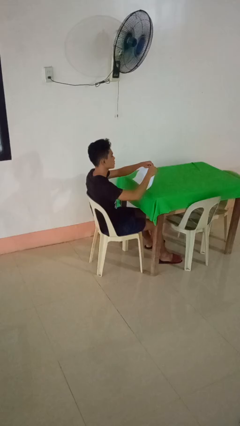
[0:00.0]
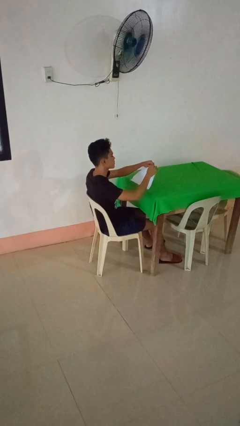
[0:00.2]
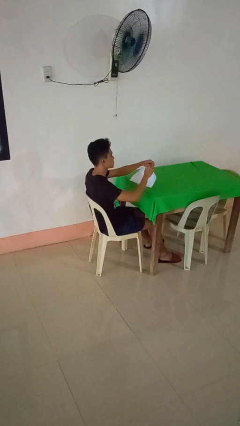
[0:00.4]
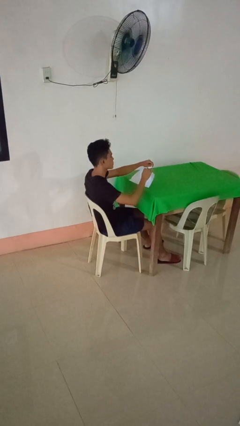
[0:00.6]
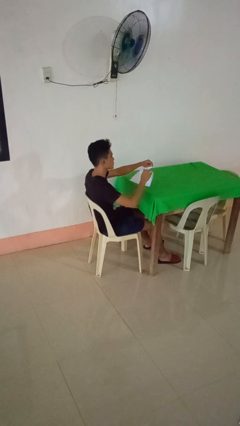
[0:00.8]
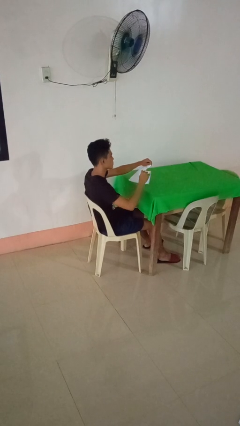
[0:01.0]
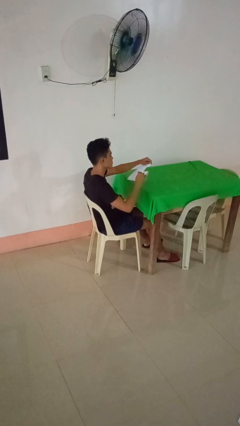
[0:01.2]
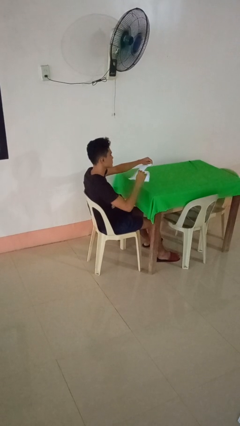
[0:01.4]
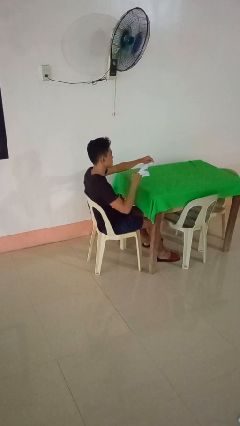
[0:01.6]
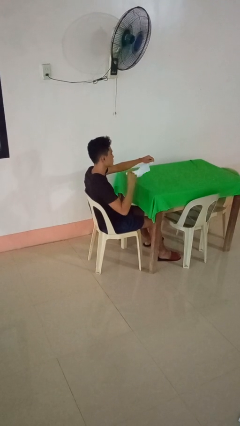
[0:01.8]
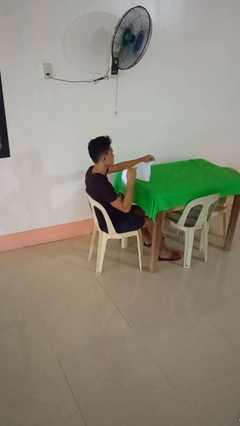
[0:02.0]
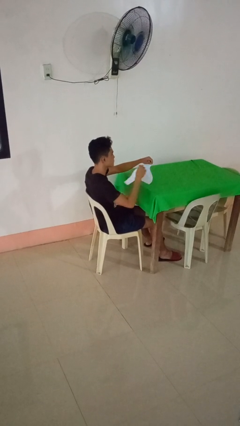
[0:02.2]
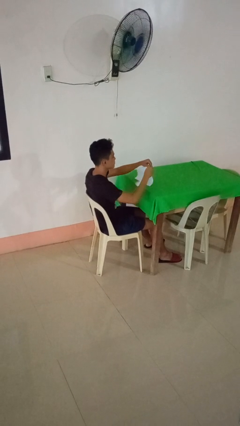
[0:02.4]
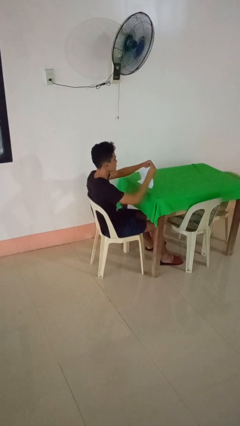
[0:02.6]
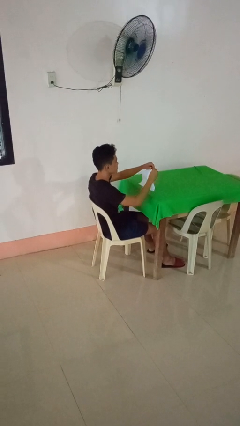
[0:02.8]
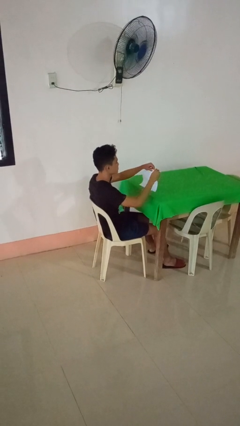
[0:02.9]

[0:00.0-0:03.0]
person tears paper

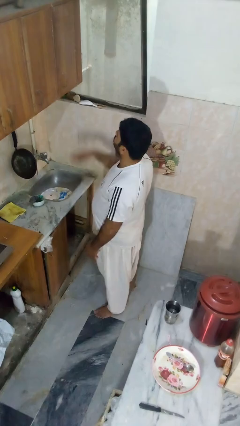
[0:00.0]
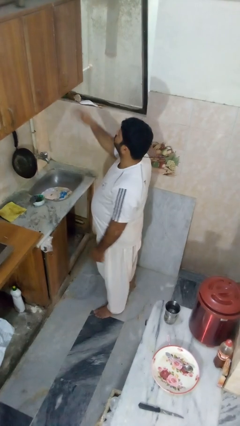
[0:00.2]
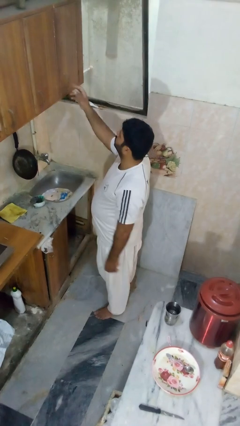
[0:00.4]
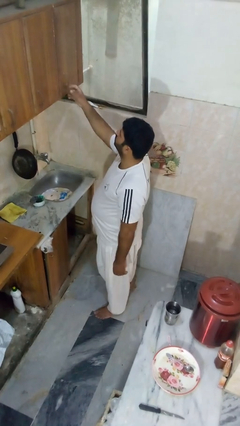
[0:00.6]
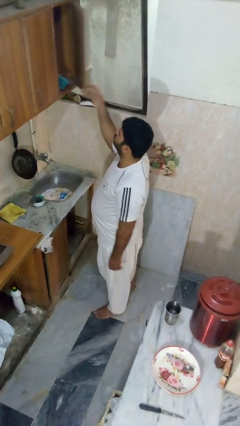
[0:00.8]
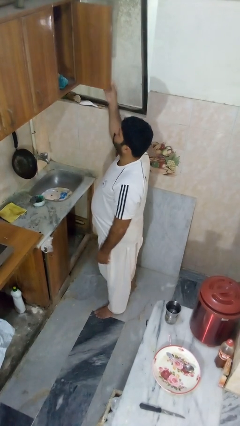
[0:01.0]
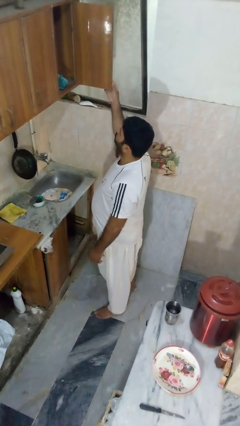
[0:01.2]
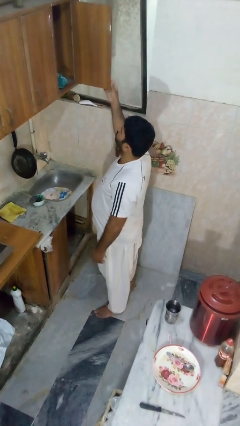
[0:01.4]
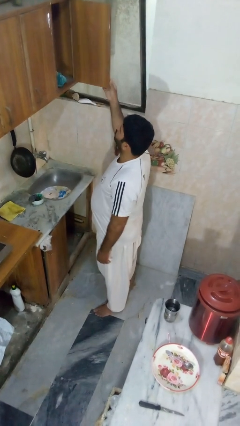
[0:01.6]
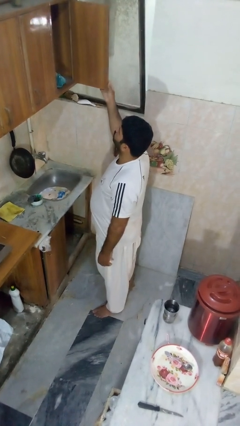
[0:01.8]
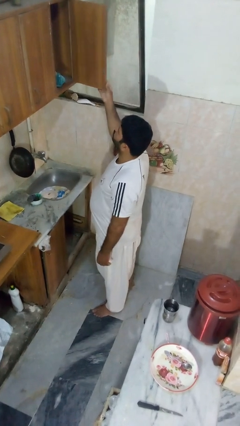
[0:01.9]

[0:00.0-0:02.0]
person opens cabinet

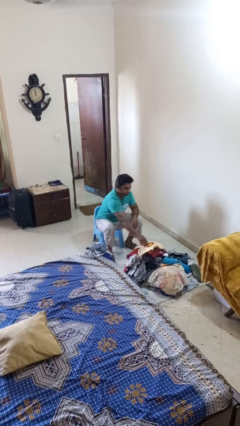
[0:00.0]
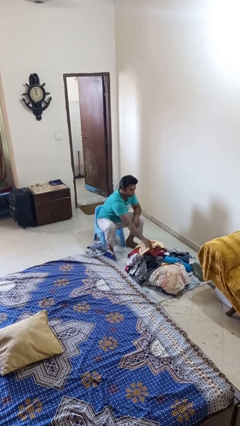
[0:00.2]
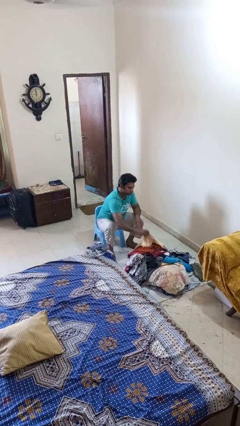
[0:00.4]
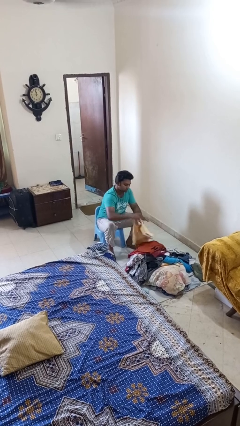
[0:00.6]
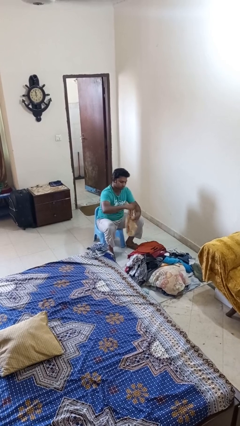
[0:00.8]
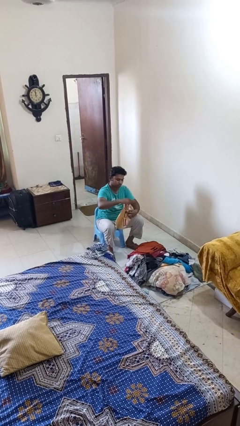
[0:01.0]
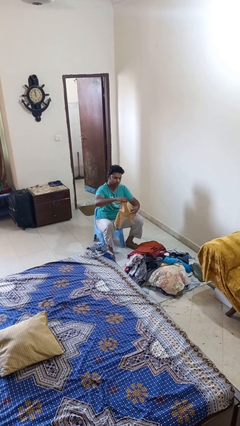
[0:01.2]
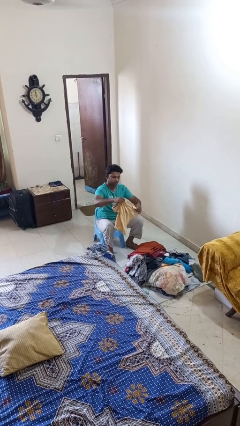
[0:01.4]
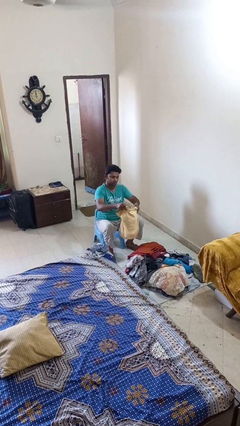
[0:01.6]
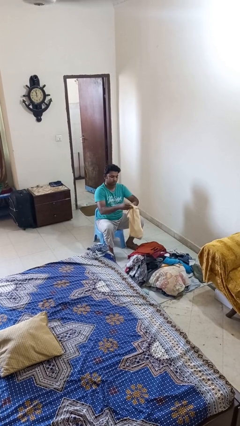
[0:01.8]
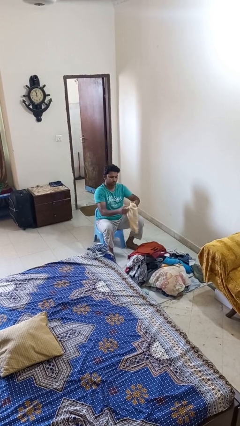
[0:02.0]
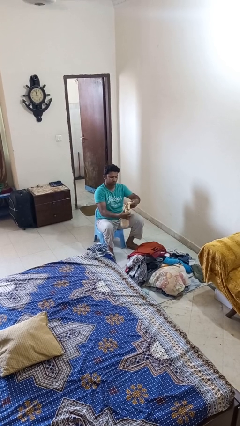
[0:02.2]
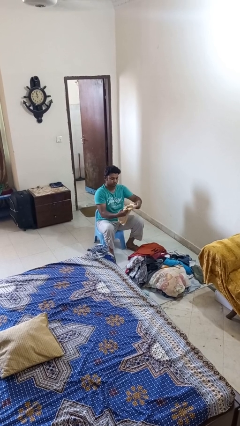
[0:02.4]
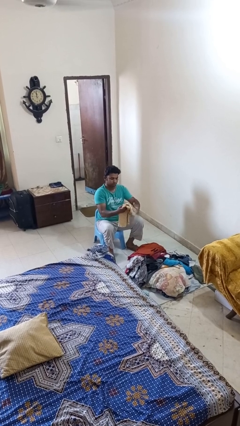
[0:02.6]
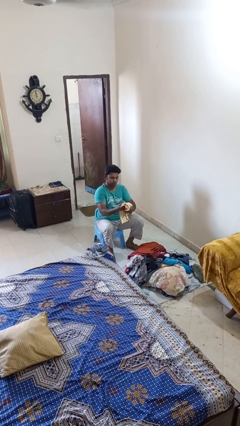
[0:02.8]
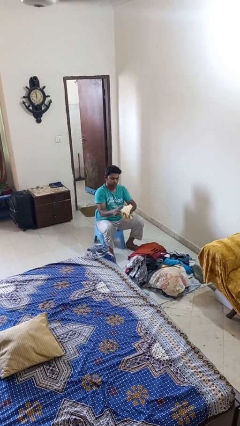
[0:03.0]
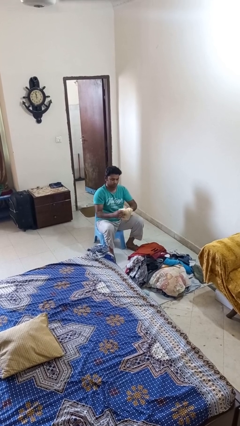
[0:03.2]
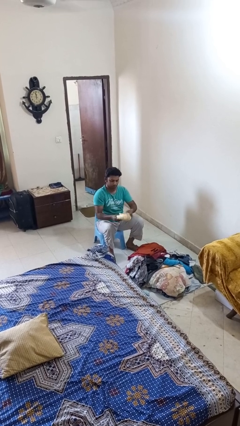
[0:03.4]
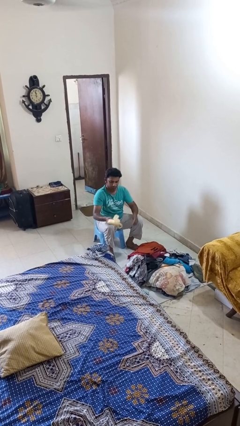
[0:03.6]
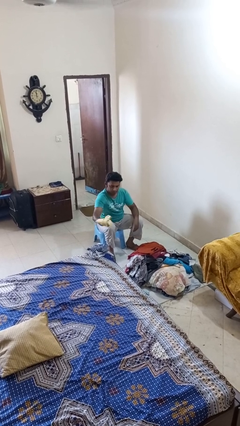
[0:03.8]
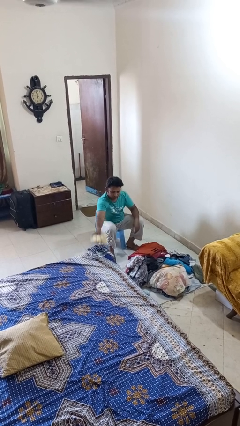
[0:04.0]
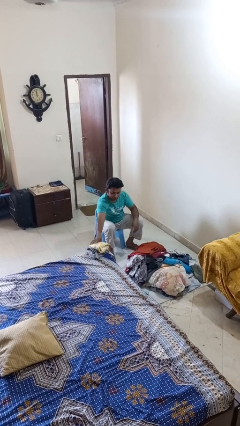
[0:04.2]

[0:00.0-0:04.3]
person folds shirt

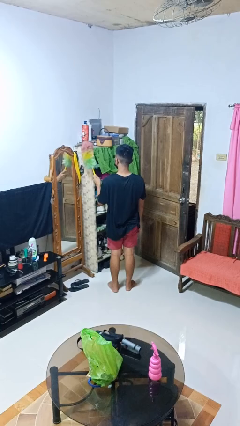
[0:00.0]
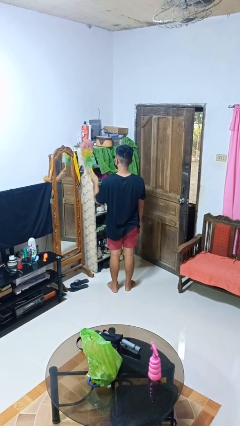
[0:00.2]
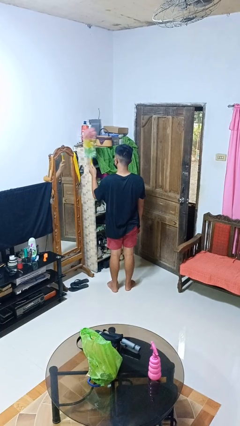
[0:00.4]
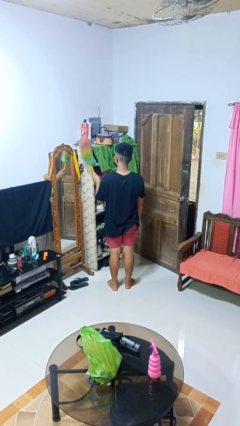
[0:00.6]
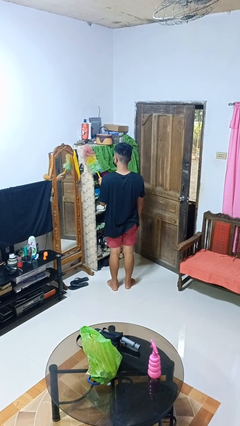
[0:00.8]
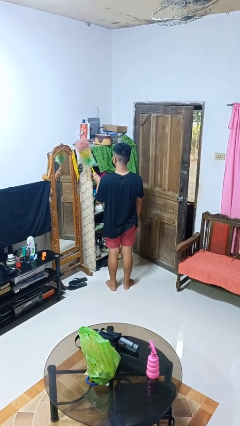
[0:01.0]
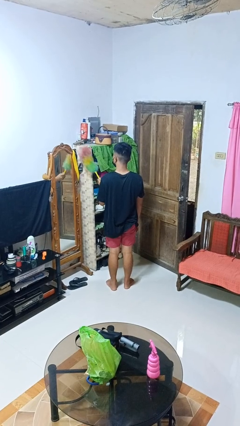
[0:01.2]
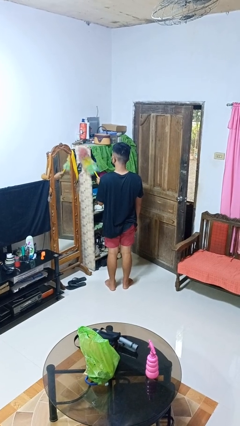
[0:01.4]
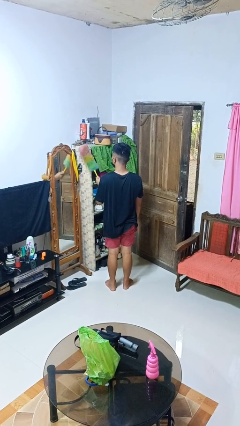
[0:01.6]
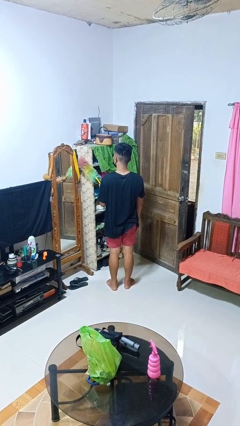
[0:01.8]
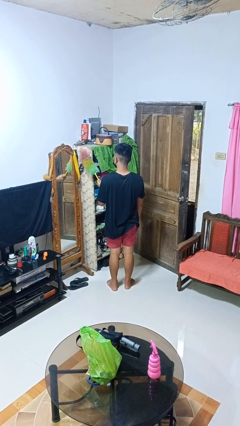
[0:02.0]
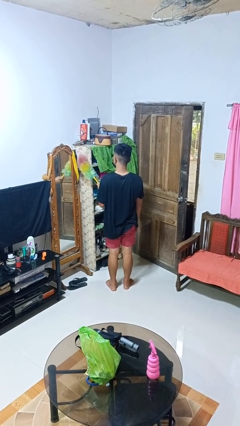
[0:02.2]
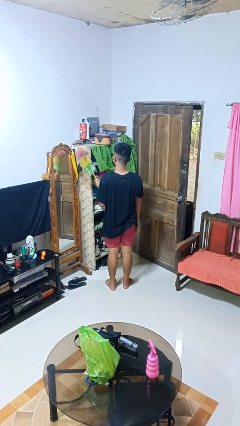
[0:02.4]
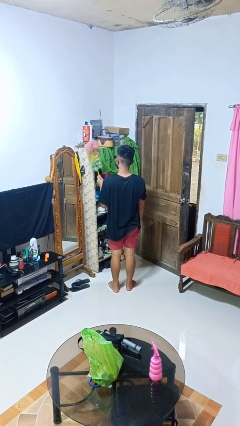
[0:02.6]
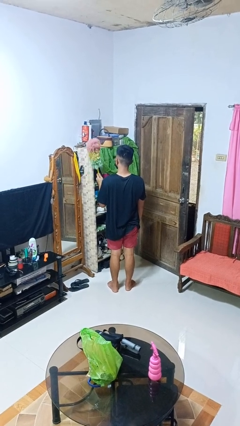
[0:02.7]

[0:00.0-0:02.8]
person dusts furniture

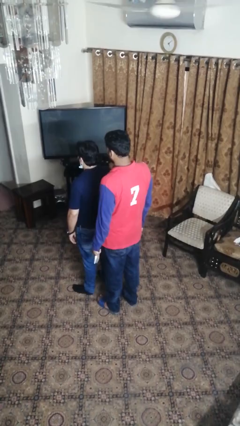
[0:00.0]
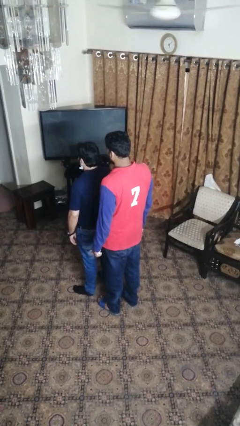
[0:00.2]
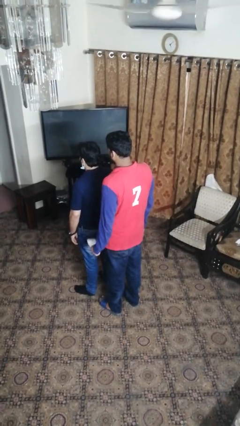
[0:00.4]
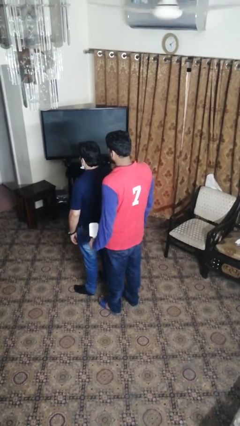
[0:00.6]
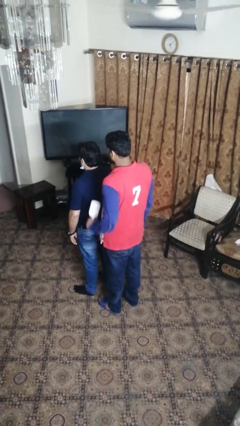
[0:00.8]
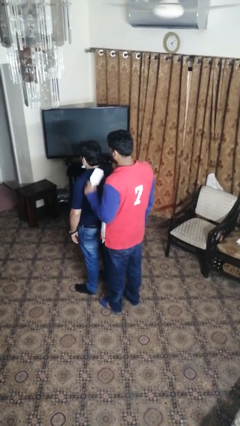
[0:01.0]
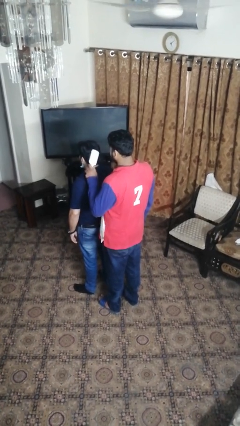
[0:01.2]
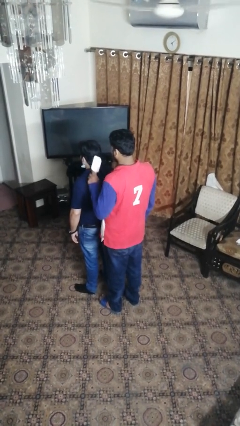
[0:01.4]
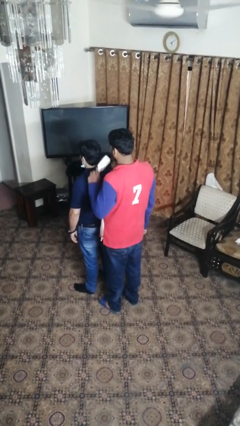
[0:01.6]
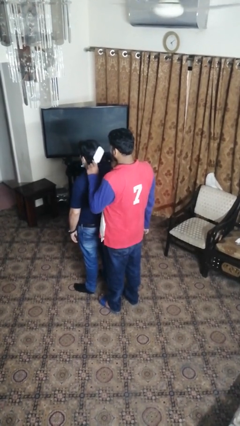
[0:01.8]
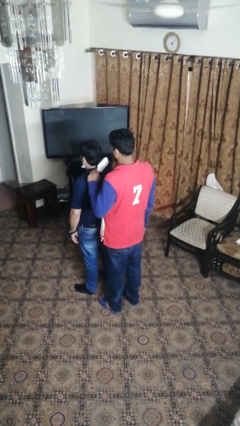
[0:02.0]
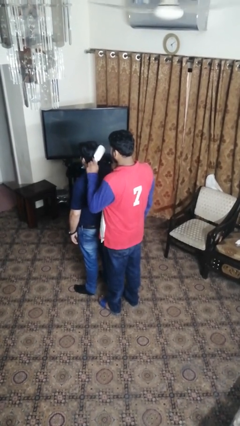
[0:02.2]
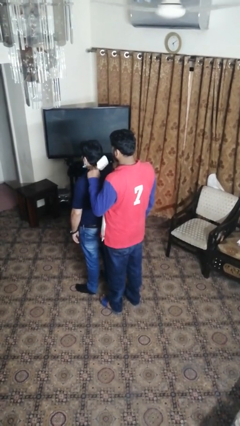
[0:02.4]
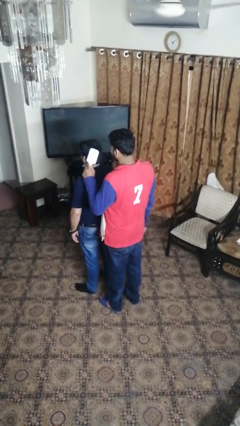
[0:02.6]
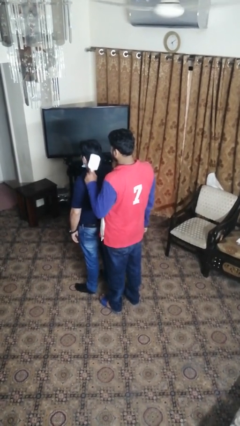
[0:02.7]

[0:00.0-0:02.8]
person brushes hair of person

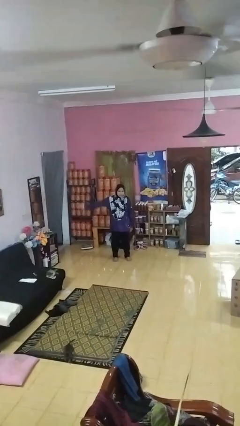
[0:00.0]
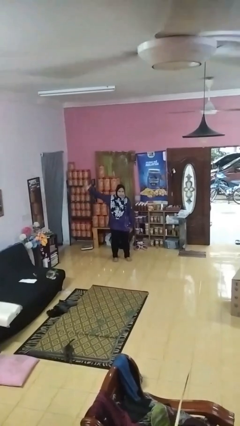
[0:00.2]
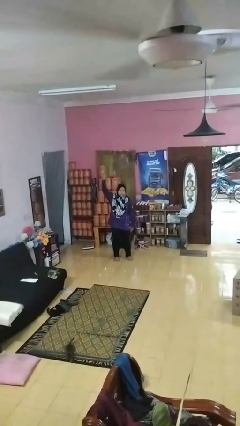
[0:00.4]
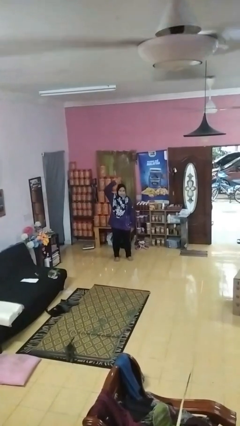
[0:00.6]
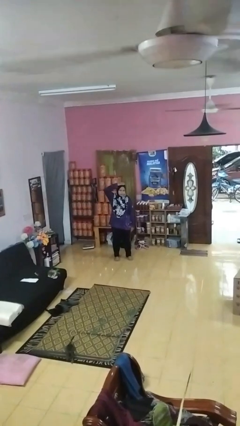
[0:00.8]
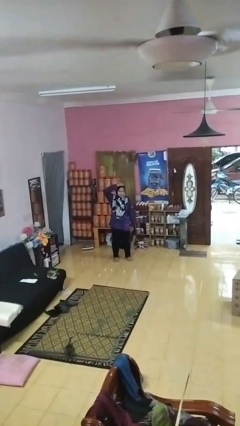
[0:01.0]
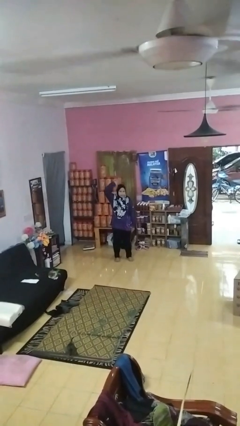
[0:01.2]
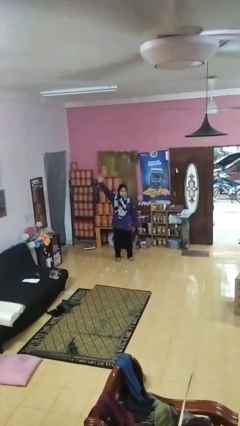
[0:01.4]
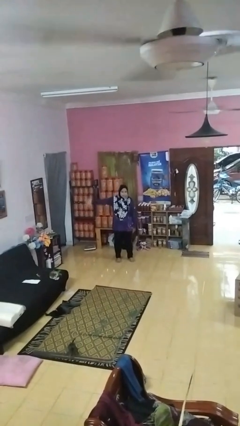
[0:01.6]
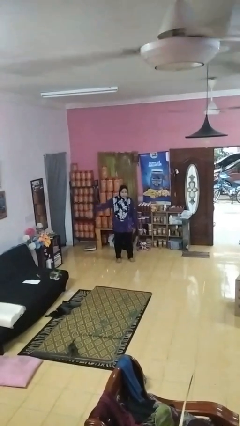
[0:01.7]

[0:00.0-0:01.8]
person pats head

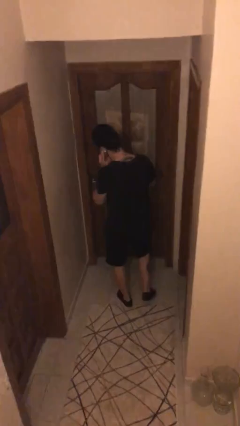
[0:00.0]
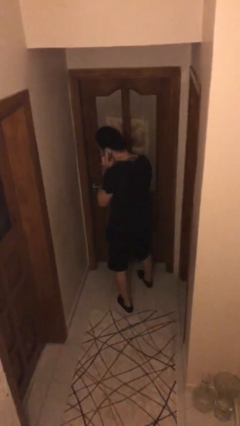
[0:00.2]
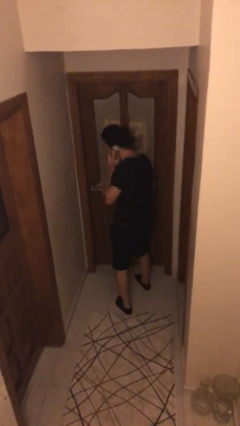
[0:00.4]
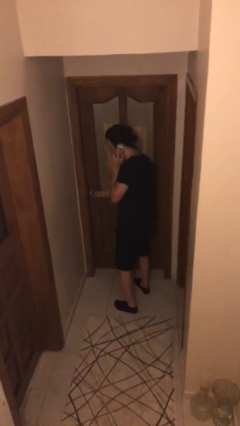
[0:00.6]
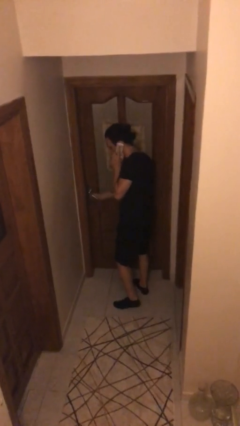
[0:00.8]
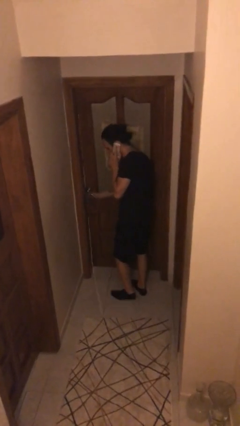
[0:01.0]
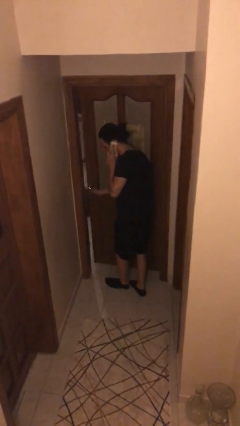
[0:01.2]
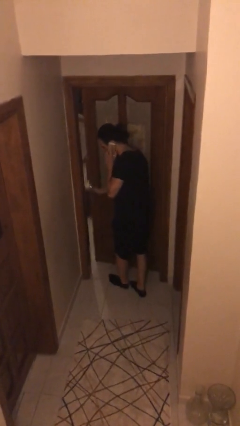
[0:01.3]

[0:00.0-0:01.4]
person opens facility door
